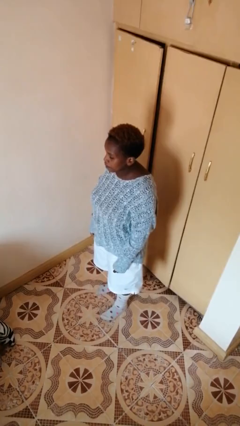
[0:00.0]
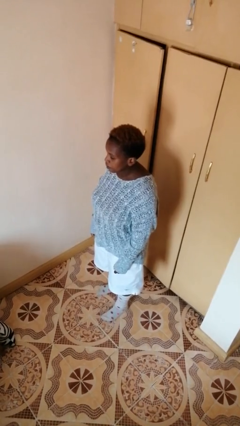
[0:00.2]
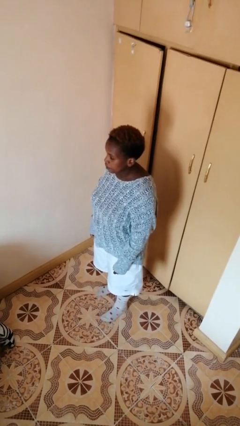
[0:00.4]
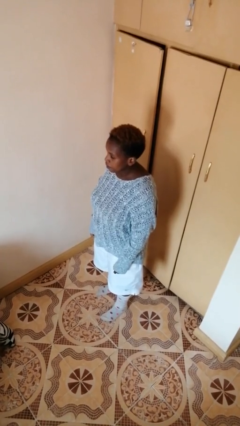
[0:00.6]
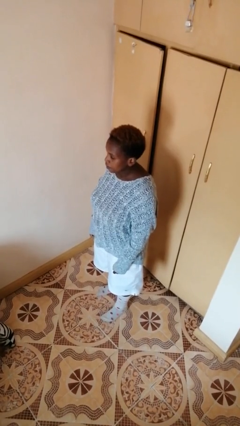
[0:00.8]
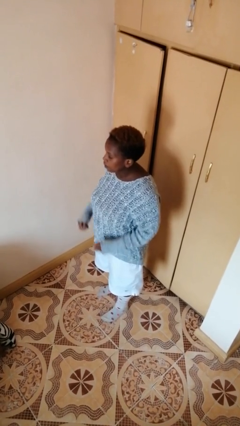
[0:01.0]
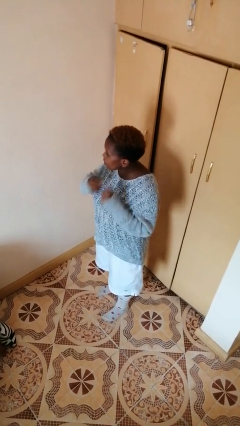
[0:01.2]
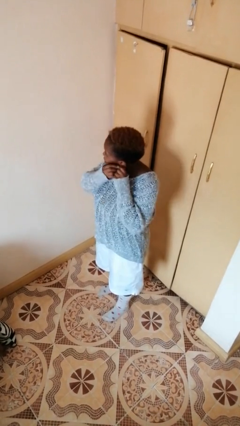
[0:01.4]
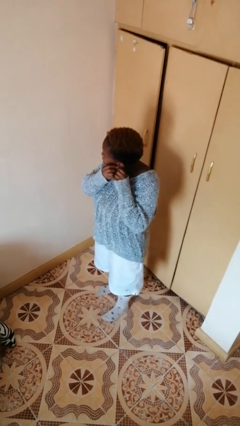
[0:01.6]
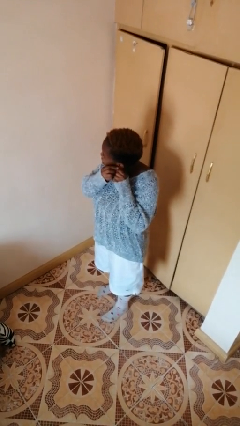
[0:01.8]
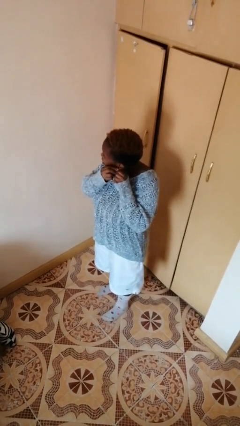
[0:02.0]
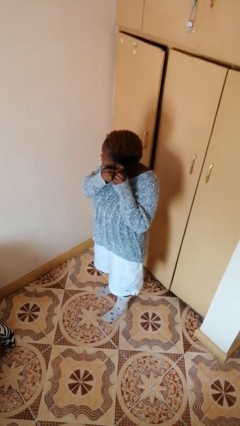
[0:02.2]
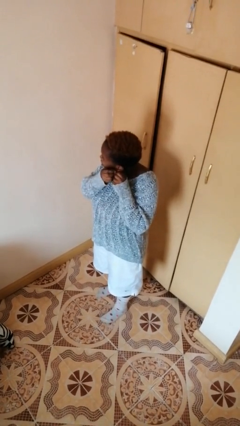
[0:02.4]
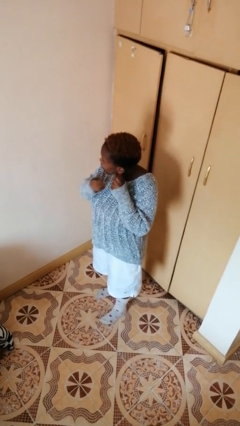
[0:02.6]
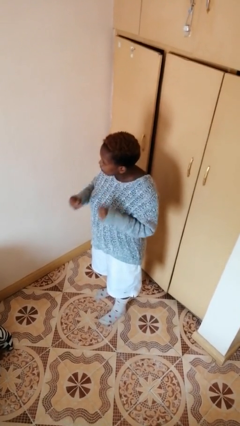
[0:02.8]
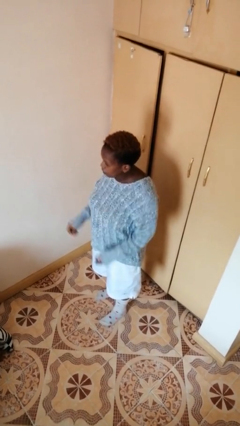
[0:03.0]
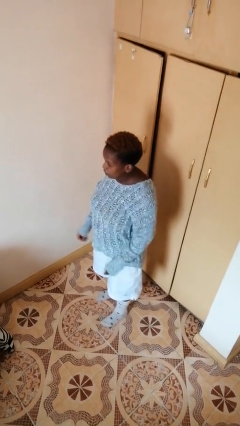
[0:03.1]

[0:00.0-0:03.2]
person takes off earrings

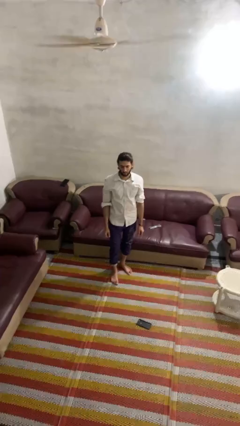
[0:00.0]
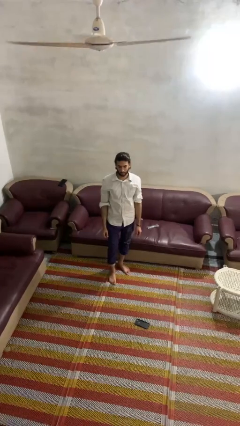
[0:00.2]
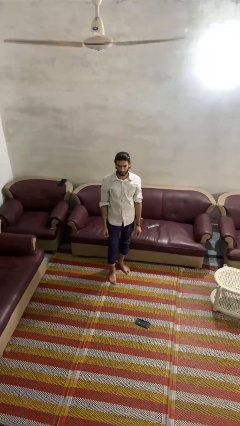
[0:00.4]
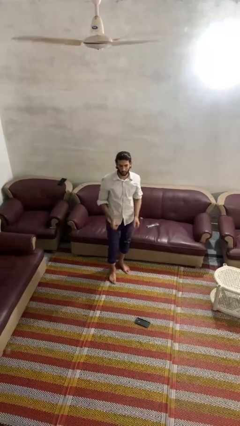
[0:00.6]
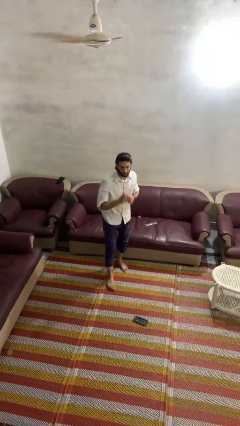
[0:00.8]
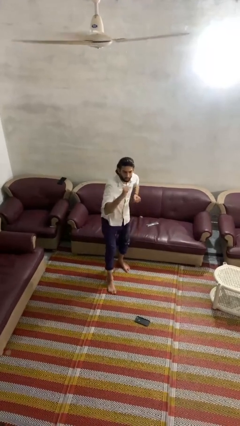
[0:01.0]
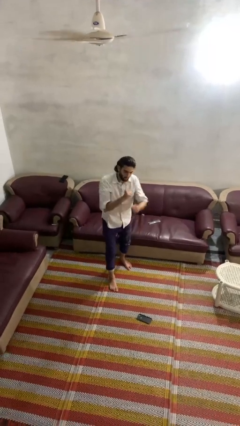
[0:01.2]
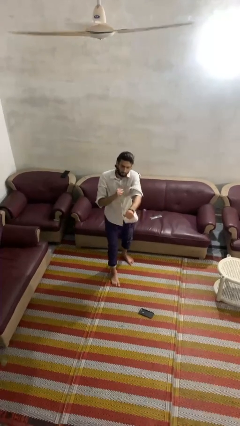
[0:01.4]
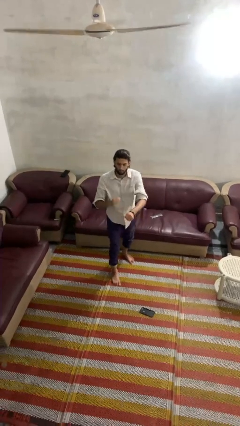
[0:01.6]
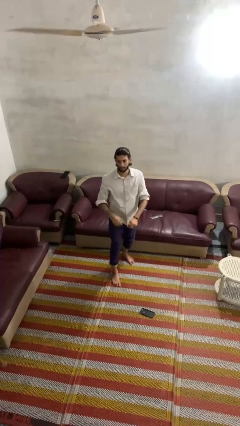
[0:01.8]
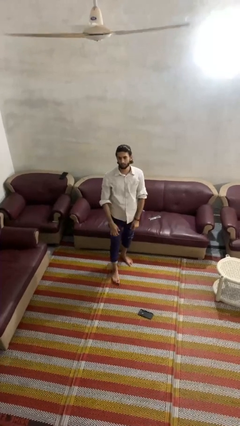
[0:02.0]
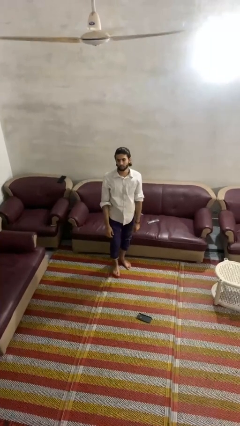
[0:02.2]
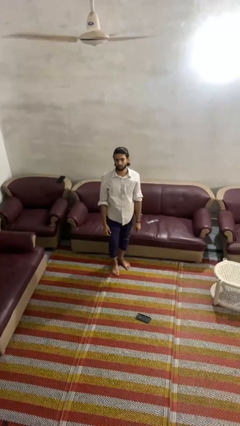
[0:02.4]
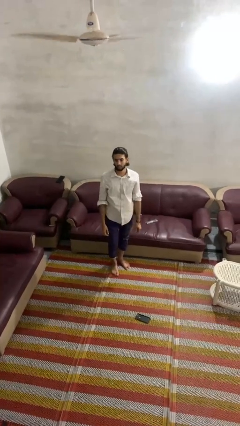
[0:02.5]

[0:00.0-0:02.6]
person punches

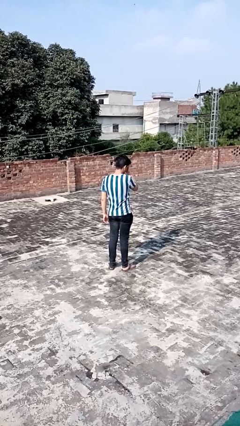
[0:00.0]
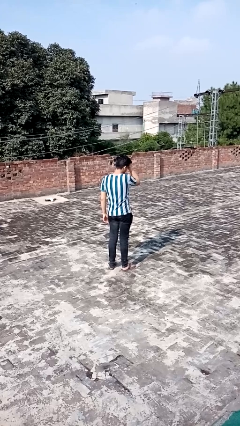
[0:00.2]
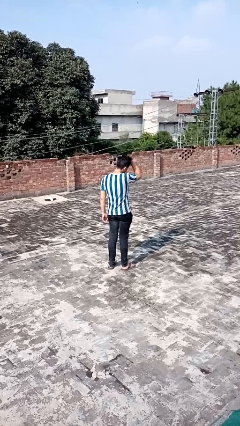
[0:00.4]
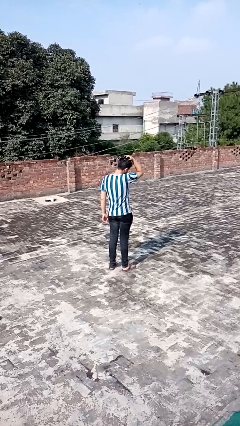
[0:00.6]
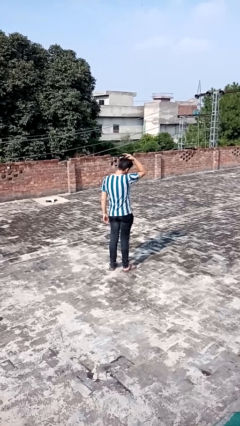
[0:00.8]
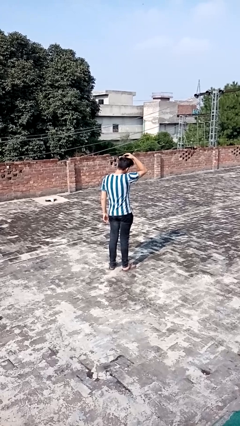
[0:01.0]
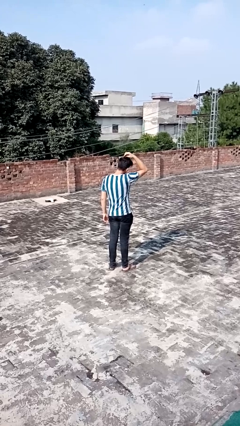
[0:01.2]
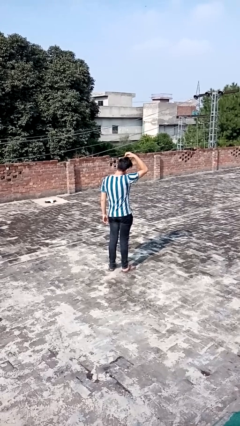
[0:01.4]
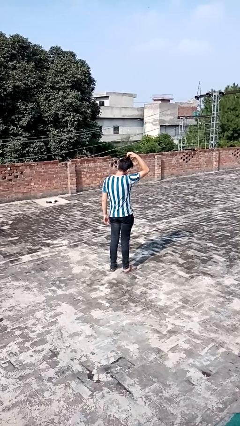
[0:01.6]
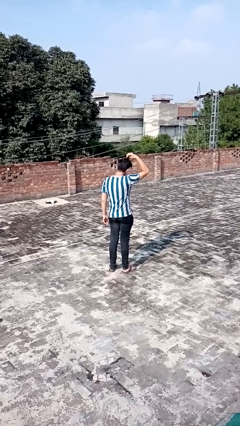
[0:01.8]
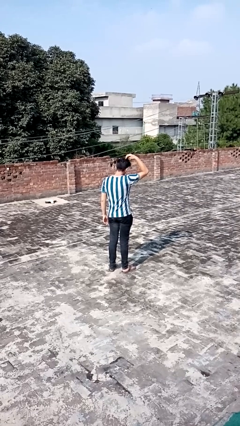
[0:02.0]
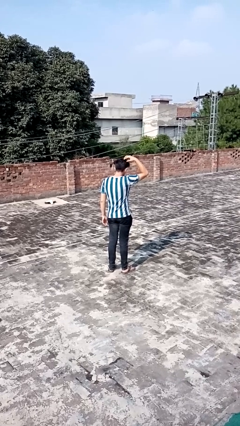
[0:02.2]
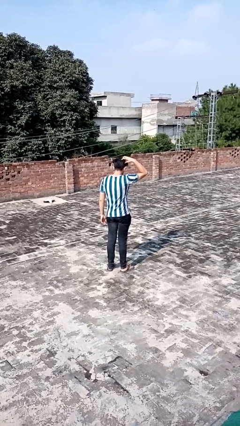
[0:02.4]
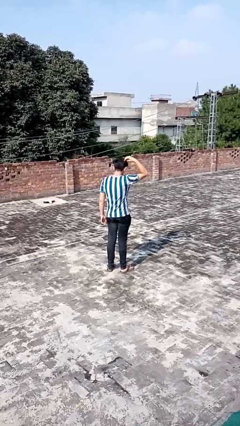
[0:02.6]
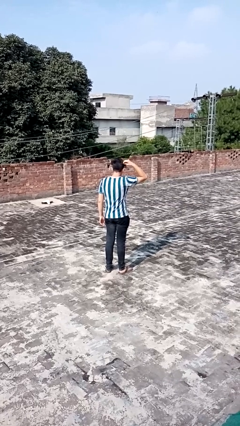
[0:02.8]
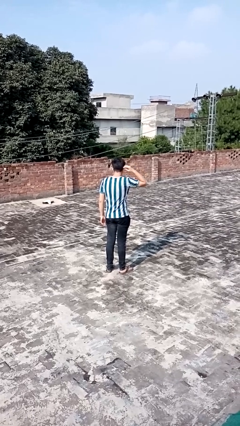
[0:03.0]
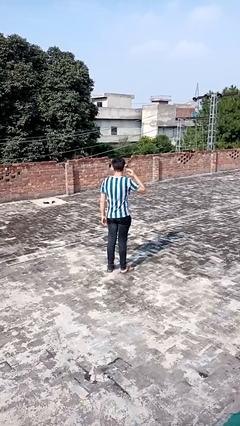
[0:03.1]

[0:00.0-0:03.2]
person strokes hair

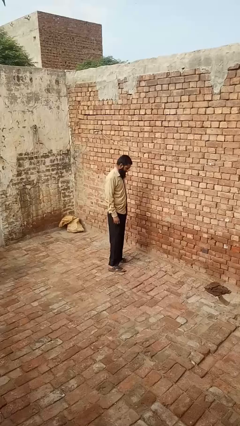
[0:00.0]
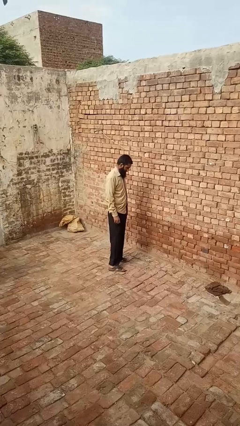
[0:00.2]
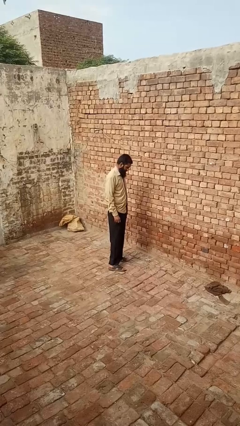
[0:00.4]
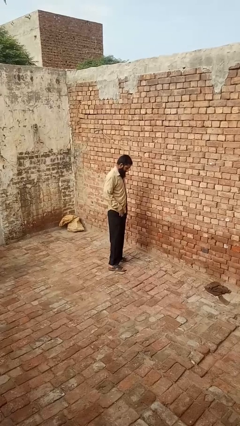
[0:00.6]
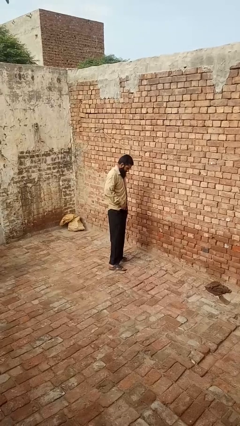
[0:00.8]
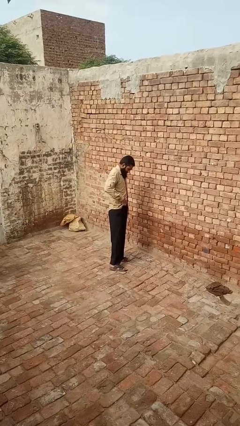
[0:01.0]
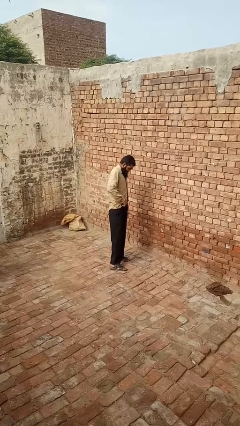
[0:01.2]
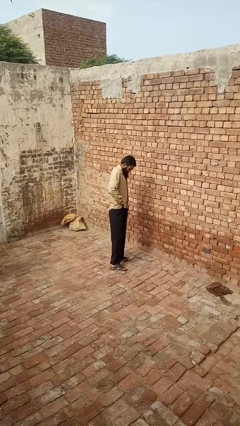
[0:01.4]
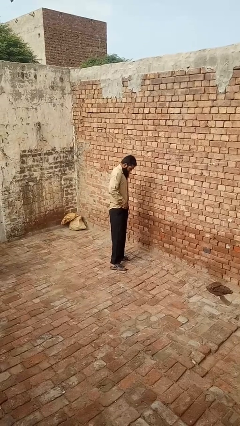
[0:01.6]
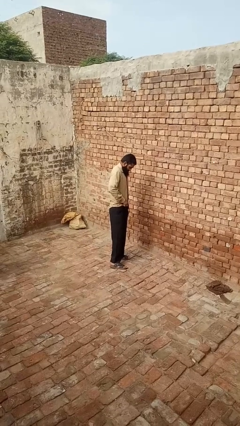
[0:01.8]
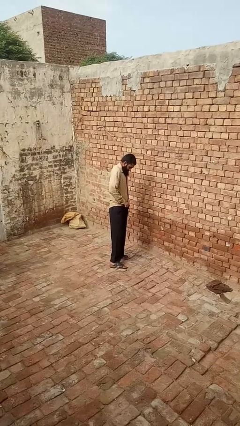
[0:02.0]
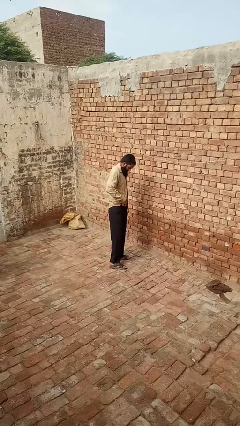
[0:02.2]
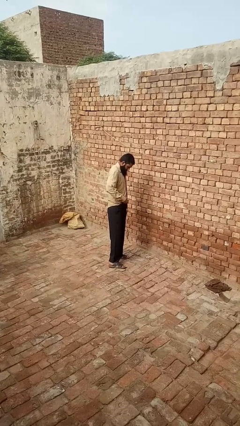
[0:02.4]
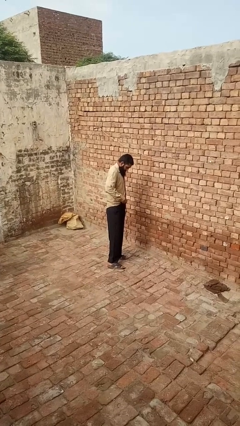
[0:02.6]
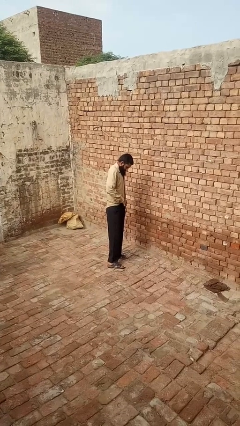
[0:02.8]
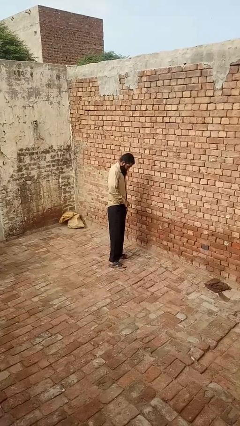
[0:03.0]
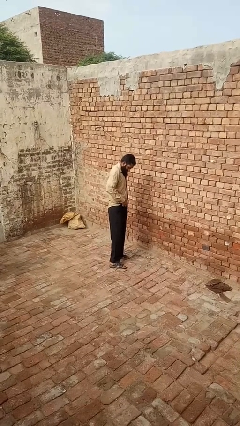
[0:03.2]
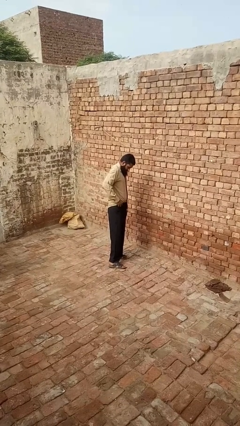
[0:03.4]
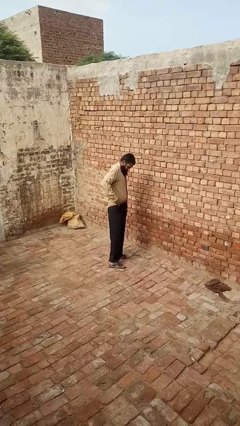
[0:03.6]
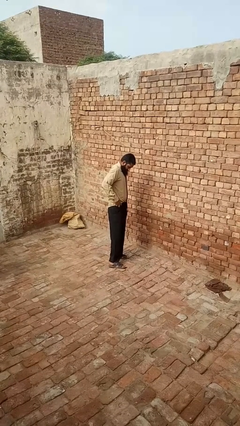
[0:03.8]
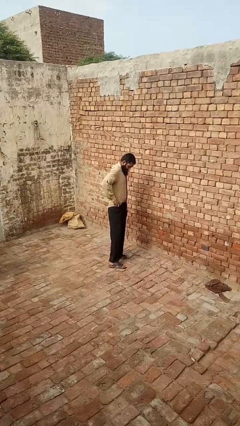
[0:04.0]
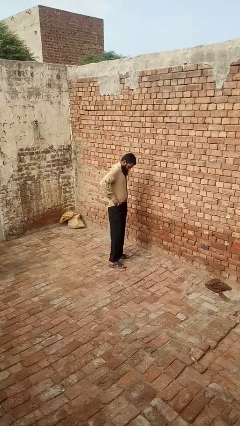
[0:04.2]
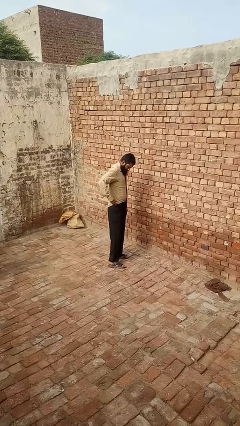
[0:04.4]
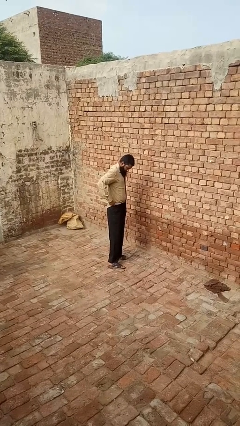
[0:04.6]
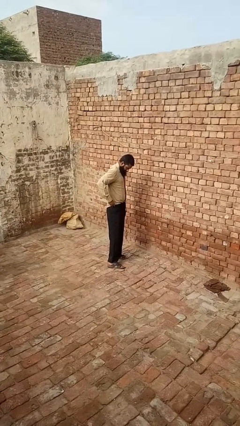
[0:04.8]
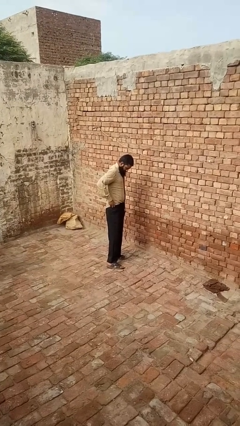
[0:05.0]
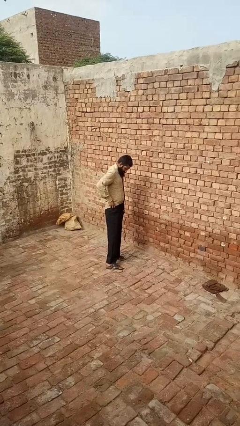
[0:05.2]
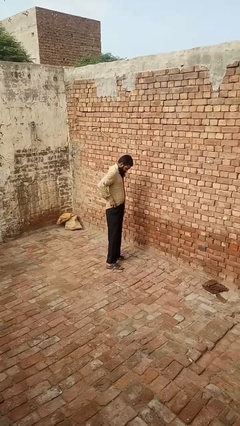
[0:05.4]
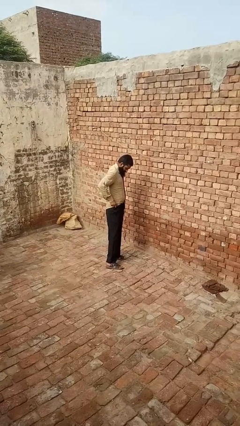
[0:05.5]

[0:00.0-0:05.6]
person tucks in shirt

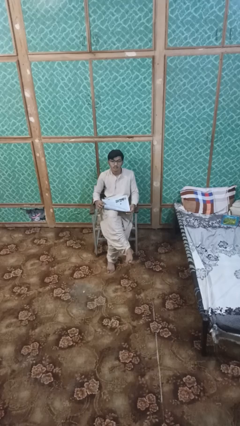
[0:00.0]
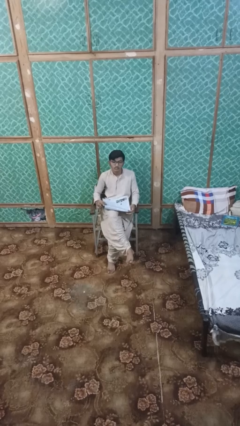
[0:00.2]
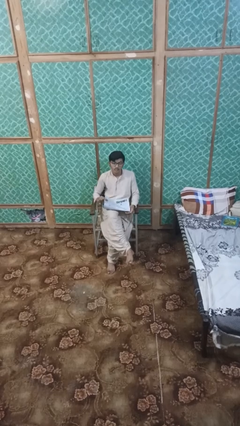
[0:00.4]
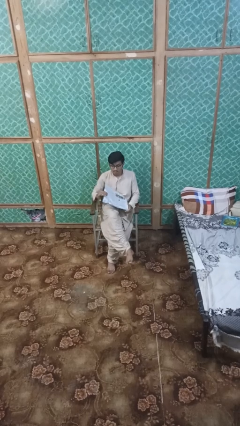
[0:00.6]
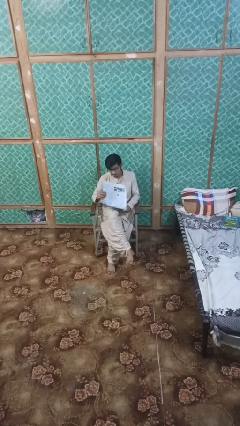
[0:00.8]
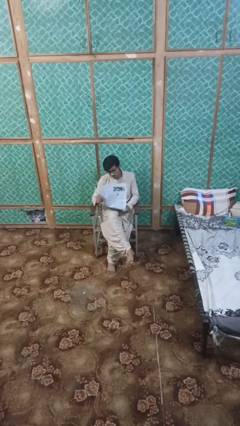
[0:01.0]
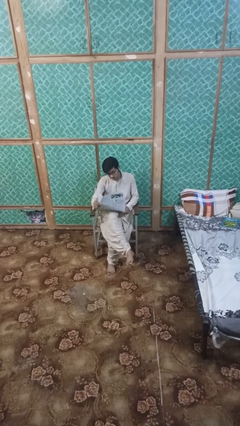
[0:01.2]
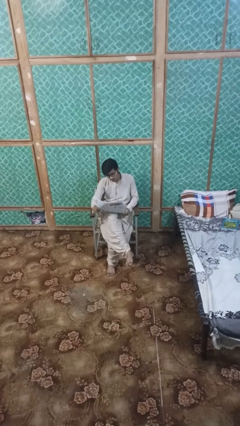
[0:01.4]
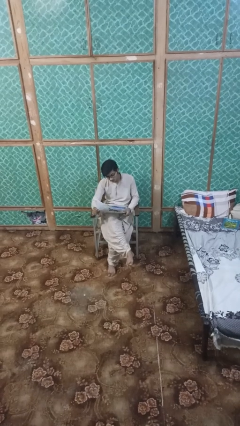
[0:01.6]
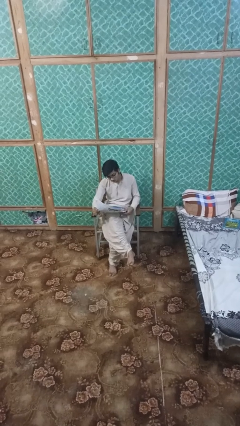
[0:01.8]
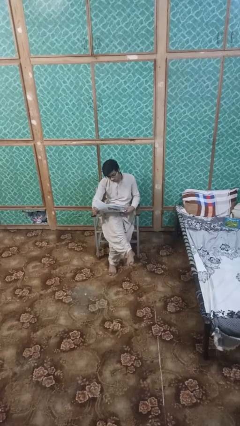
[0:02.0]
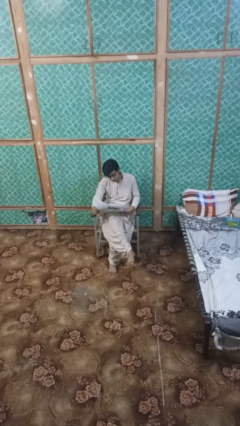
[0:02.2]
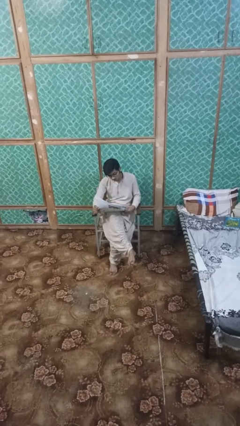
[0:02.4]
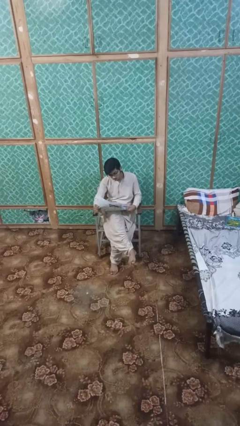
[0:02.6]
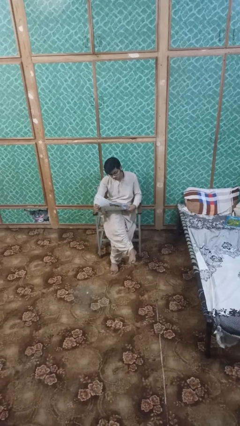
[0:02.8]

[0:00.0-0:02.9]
person reads newspaper
